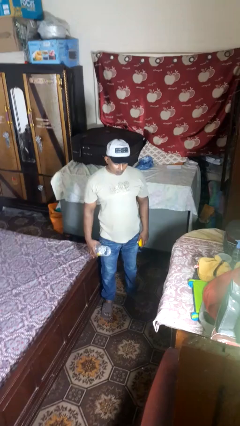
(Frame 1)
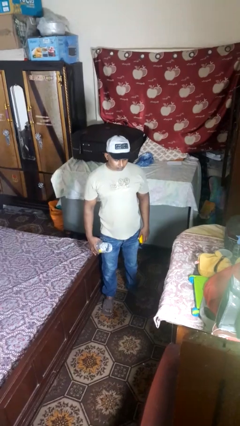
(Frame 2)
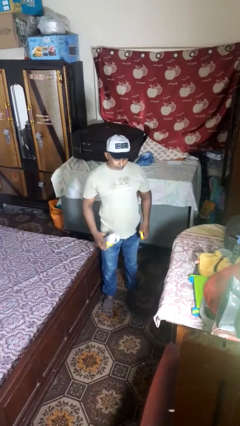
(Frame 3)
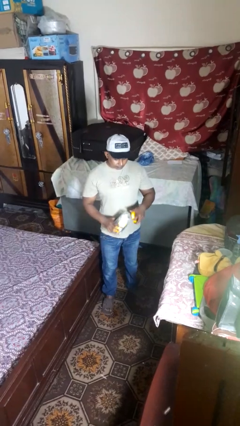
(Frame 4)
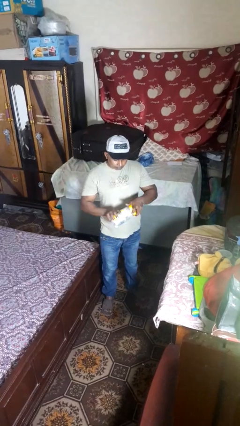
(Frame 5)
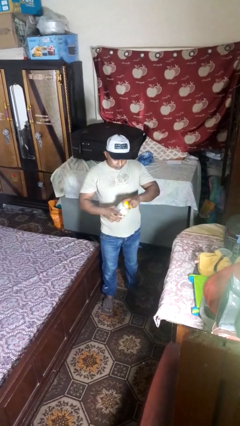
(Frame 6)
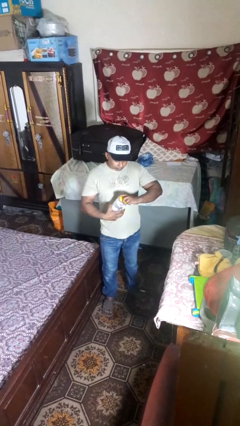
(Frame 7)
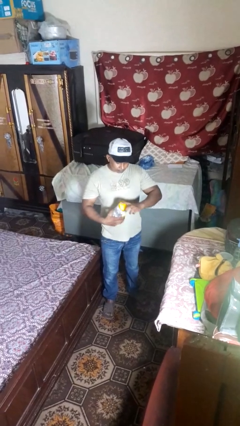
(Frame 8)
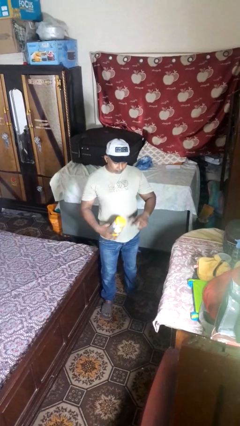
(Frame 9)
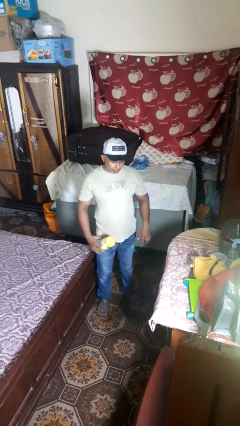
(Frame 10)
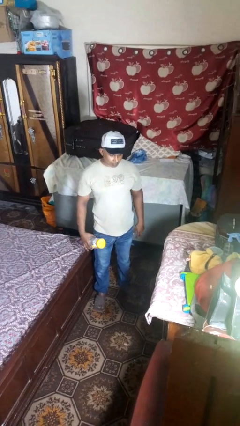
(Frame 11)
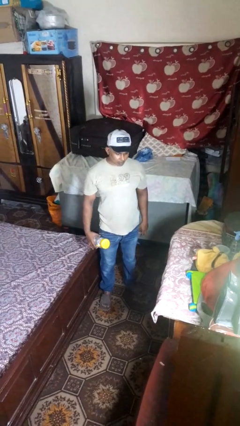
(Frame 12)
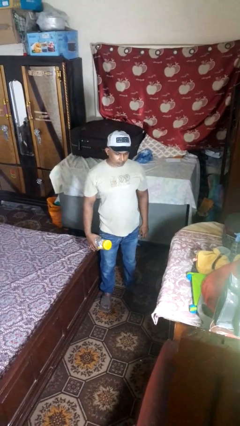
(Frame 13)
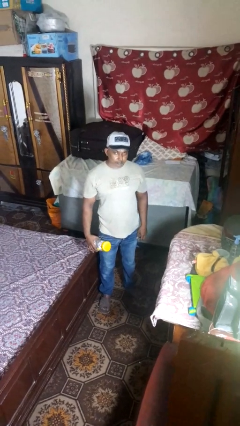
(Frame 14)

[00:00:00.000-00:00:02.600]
person closes jar

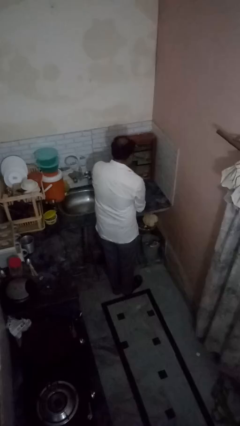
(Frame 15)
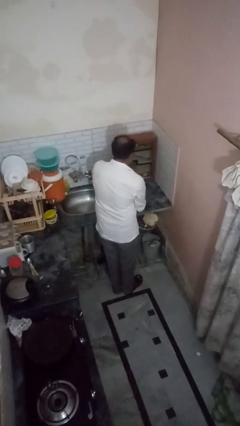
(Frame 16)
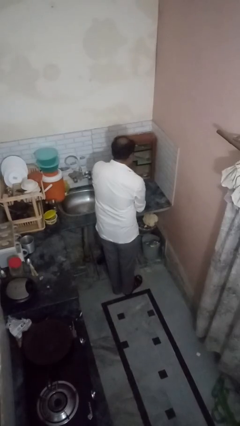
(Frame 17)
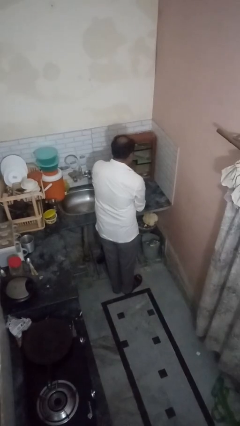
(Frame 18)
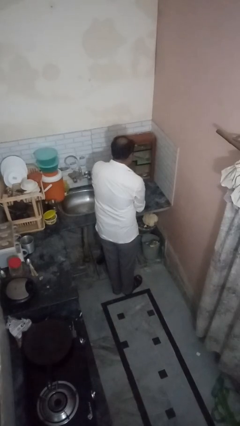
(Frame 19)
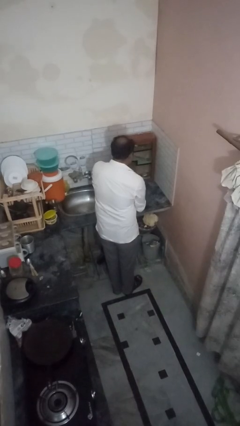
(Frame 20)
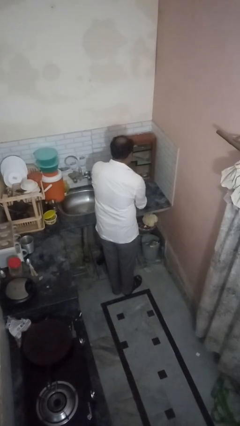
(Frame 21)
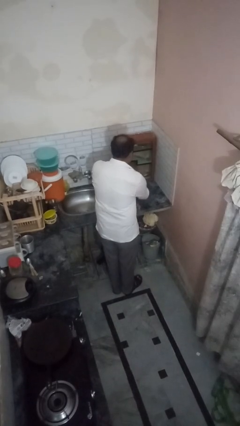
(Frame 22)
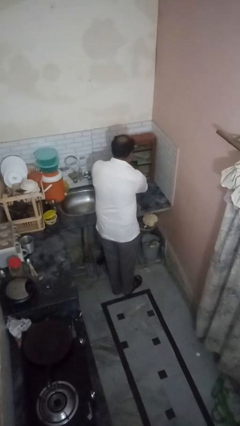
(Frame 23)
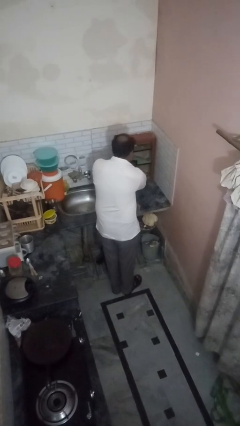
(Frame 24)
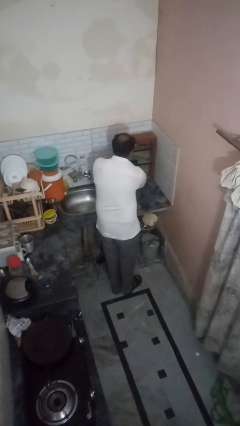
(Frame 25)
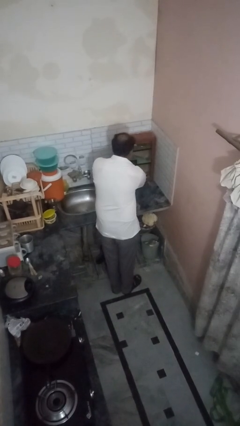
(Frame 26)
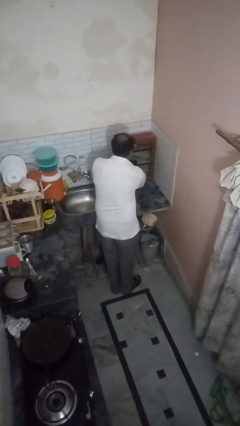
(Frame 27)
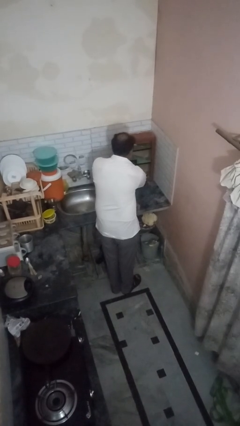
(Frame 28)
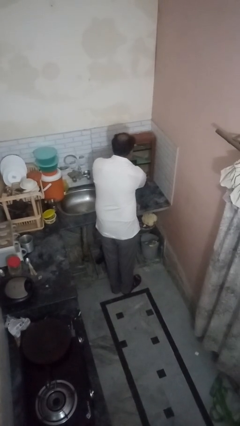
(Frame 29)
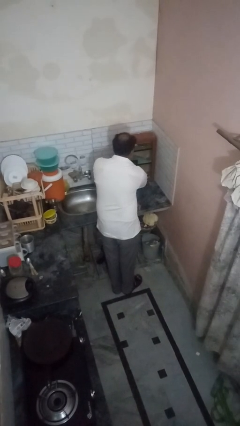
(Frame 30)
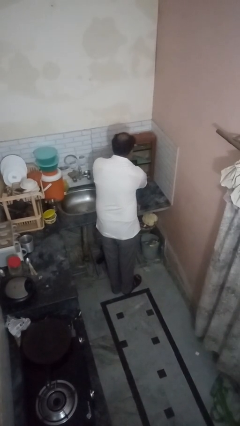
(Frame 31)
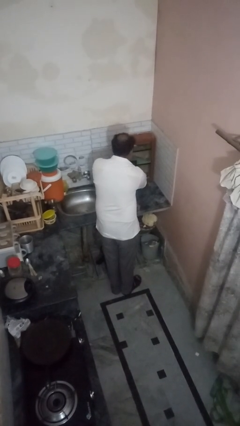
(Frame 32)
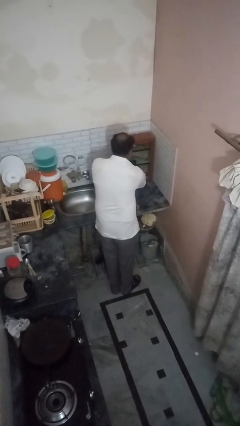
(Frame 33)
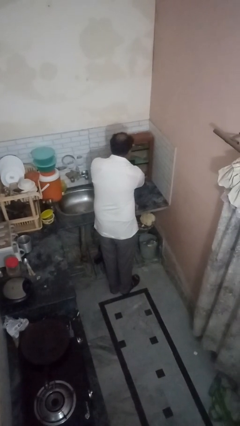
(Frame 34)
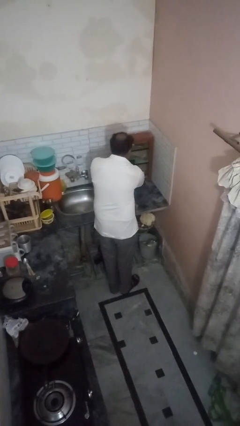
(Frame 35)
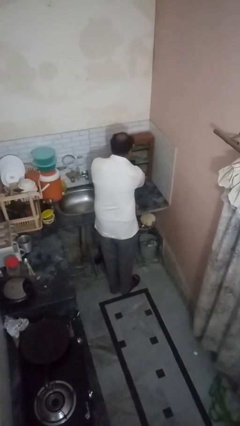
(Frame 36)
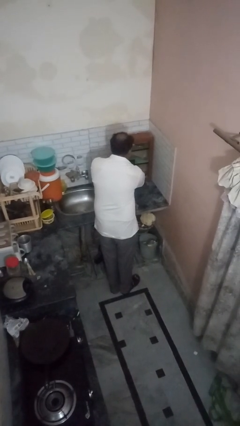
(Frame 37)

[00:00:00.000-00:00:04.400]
person searches in kitchen drawer

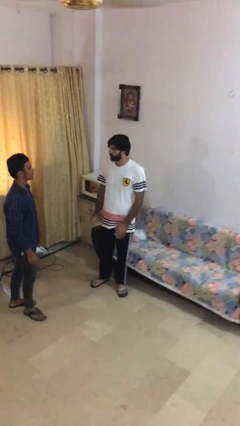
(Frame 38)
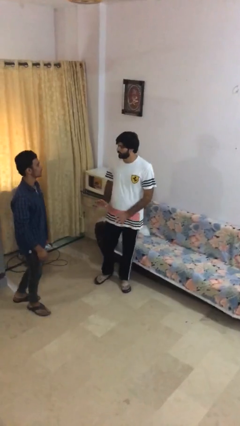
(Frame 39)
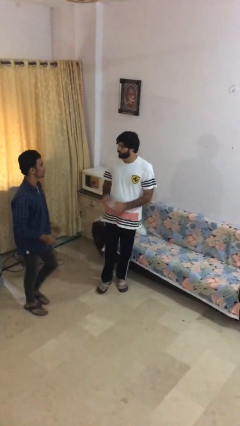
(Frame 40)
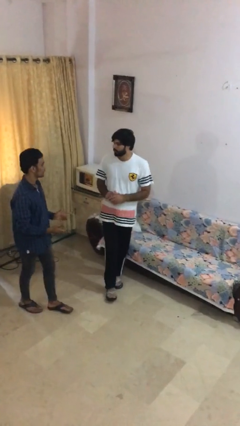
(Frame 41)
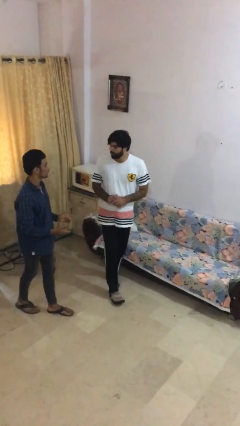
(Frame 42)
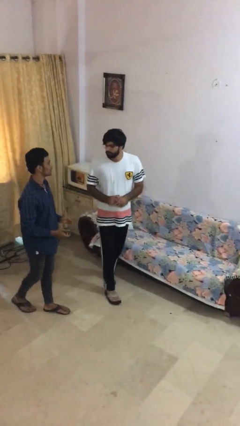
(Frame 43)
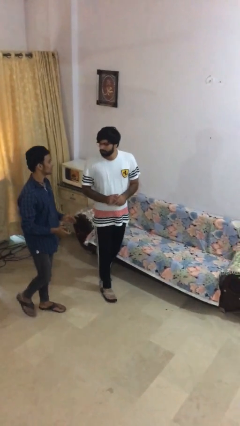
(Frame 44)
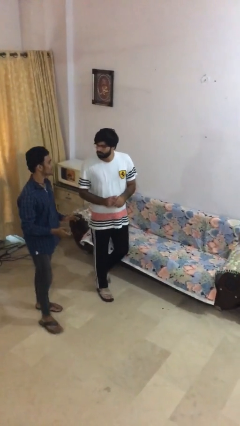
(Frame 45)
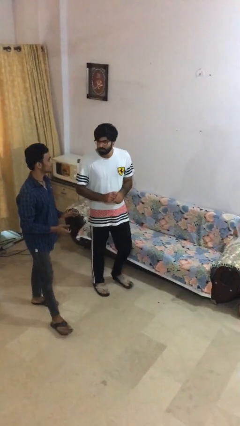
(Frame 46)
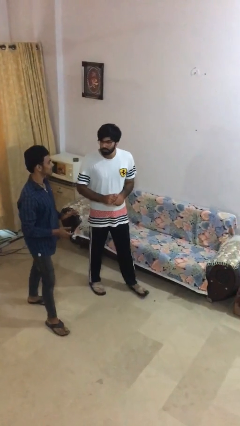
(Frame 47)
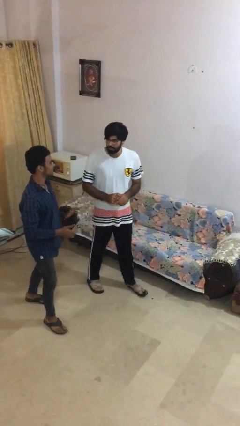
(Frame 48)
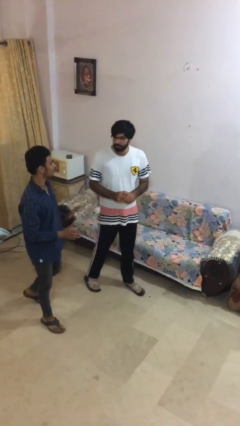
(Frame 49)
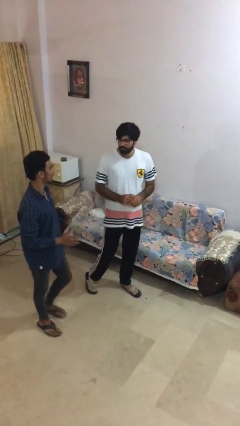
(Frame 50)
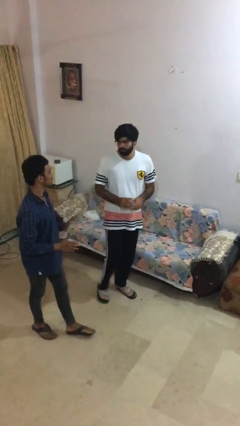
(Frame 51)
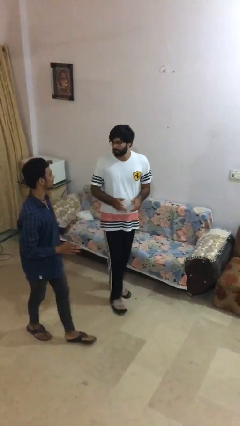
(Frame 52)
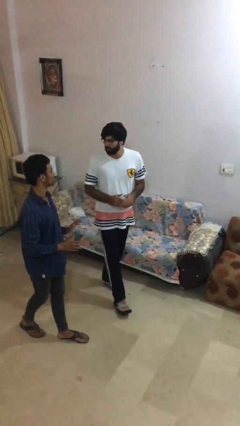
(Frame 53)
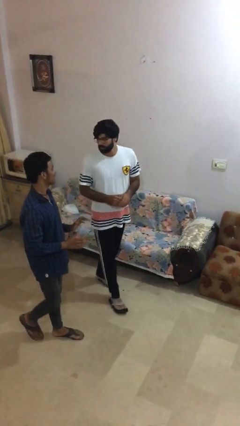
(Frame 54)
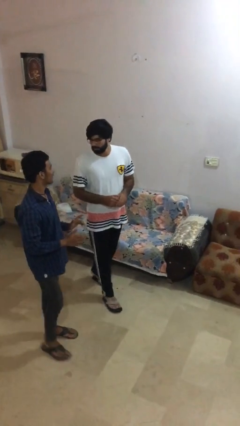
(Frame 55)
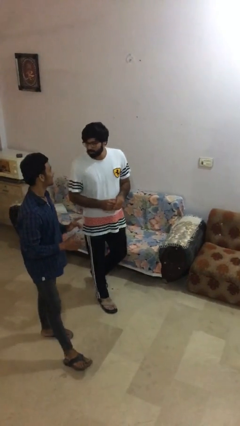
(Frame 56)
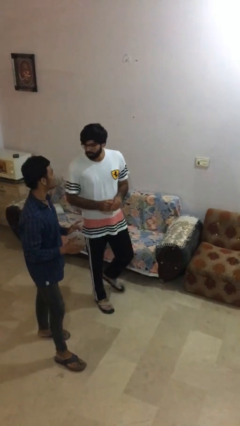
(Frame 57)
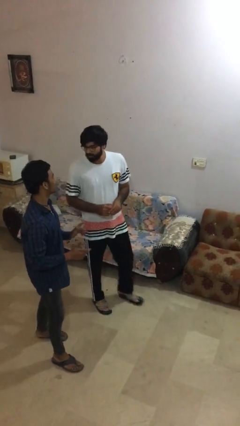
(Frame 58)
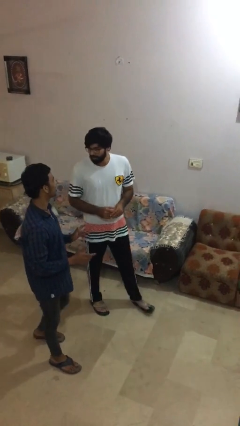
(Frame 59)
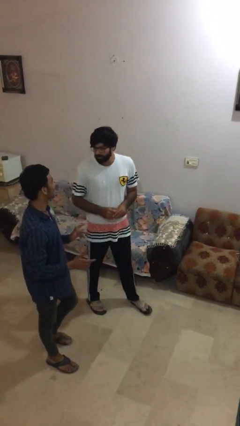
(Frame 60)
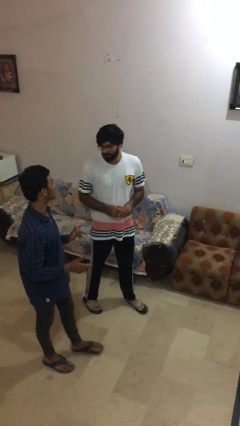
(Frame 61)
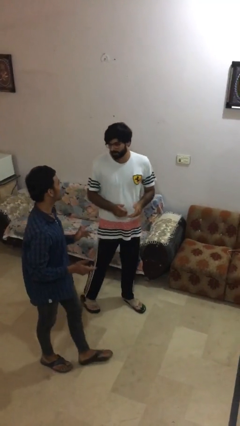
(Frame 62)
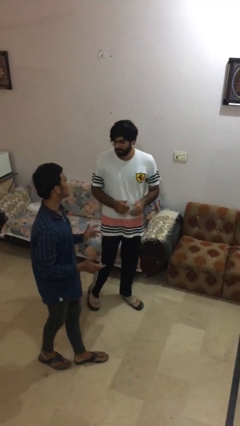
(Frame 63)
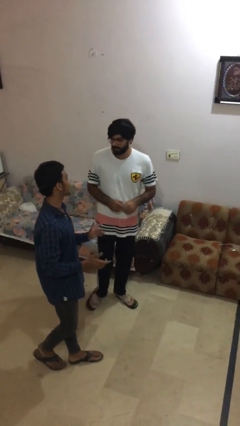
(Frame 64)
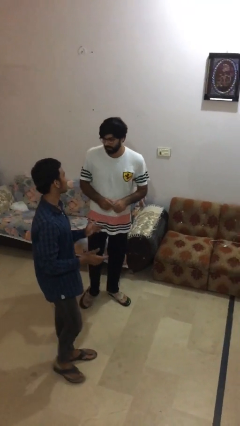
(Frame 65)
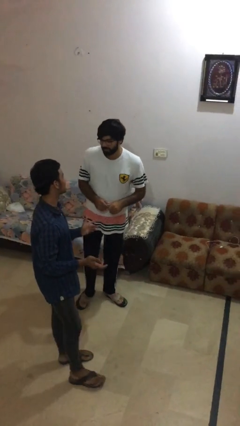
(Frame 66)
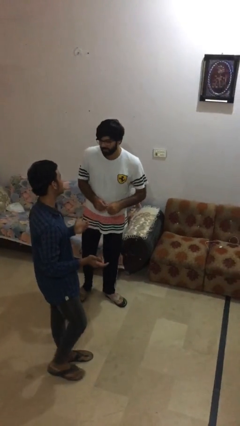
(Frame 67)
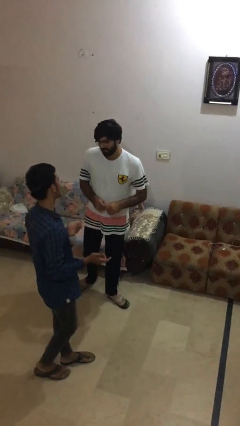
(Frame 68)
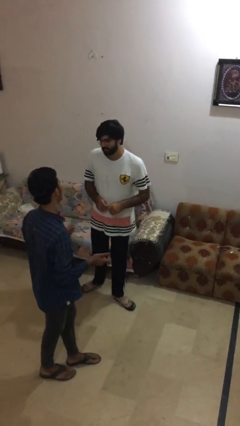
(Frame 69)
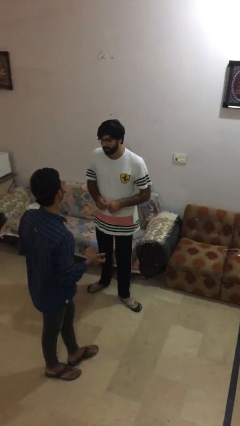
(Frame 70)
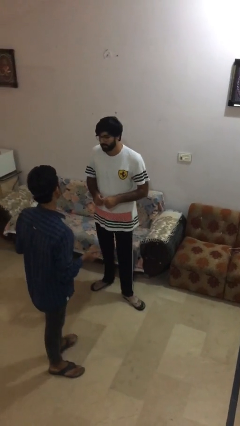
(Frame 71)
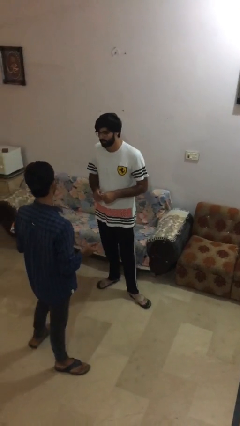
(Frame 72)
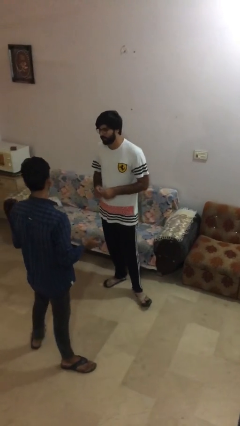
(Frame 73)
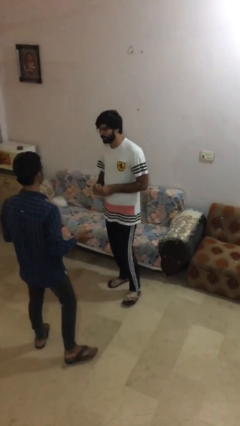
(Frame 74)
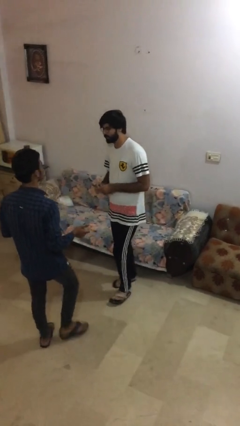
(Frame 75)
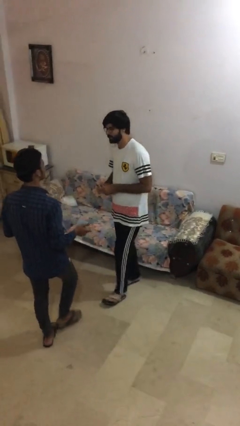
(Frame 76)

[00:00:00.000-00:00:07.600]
person talks to person

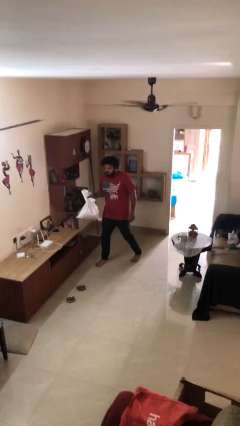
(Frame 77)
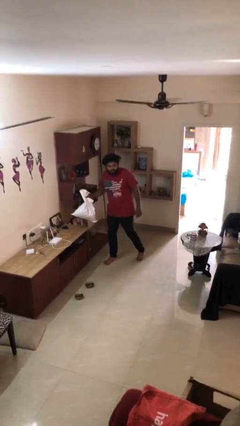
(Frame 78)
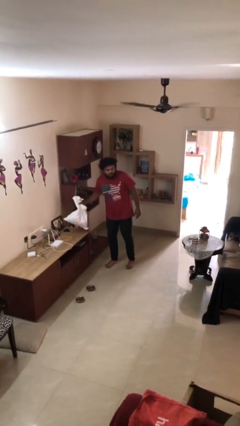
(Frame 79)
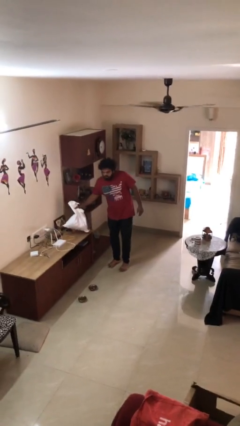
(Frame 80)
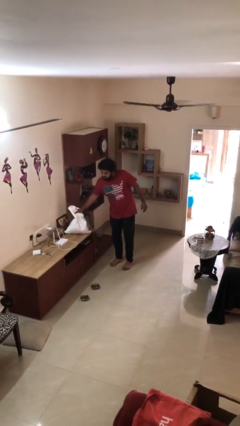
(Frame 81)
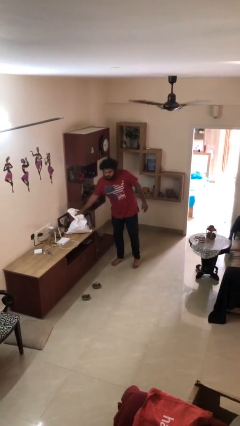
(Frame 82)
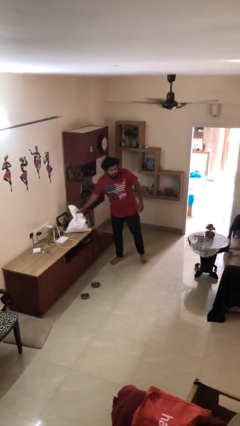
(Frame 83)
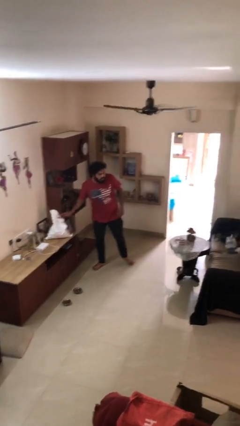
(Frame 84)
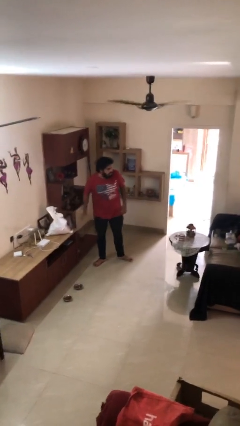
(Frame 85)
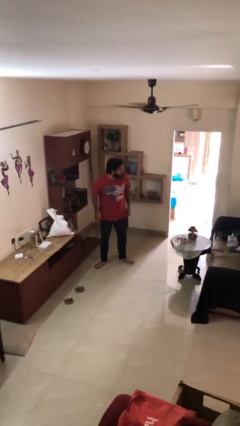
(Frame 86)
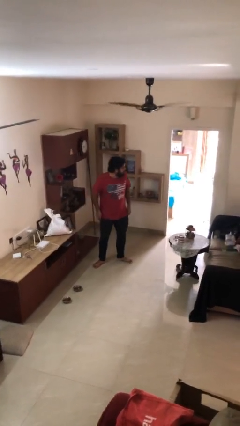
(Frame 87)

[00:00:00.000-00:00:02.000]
person puts down object on table

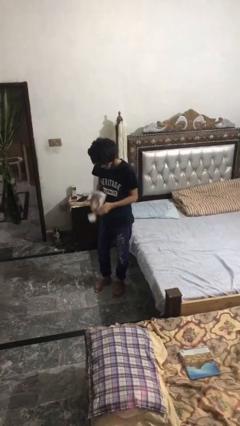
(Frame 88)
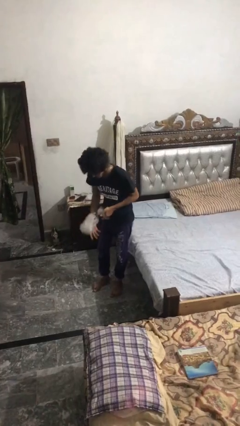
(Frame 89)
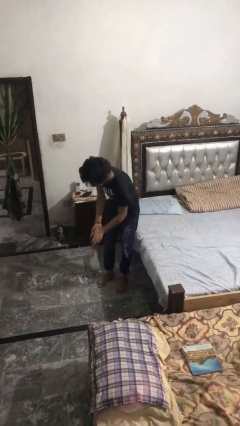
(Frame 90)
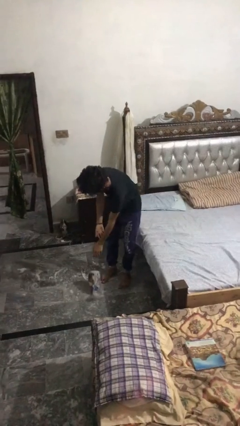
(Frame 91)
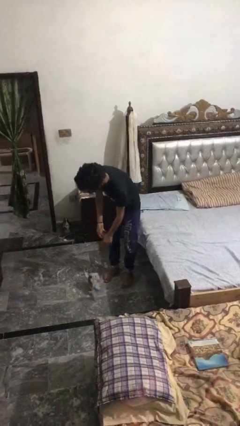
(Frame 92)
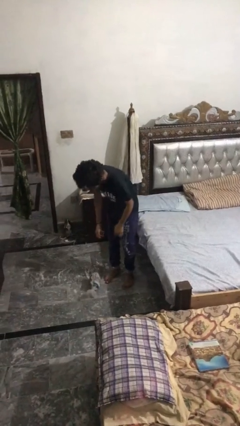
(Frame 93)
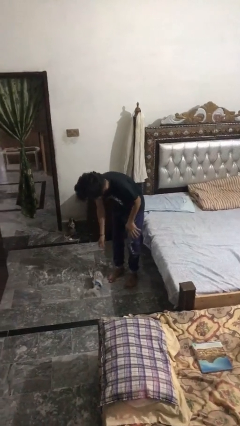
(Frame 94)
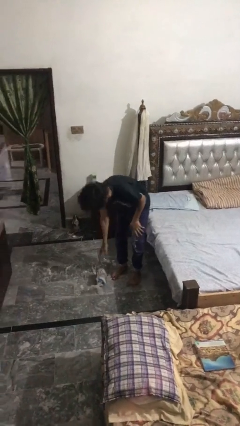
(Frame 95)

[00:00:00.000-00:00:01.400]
person drops object
